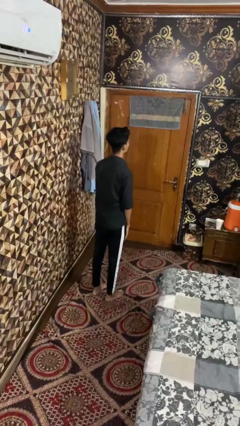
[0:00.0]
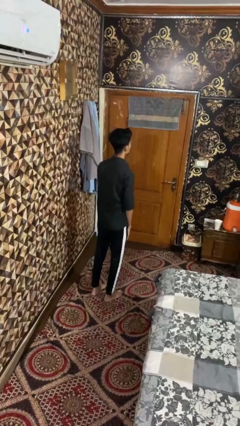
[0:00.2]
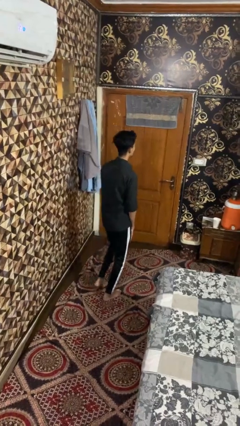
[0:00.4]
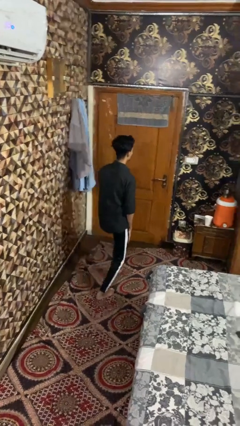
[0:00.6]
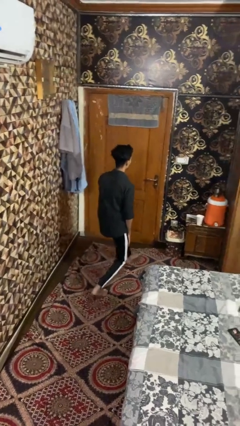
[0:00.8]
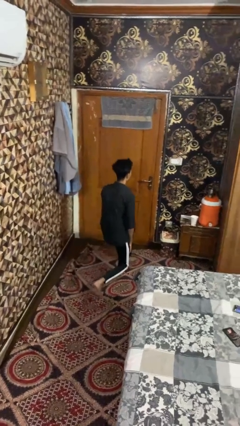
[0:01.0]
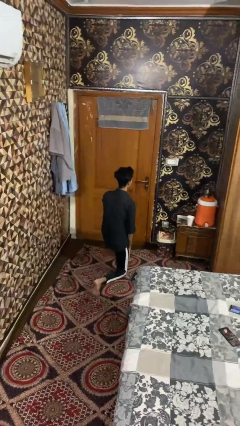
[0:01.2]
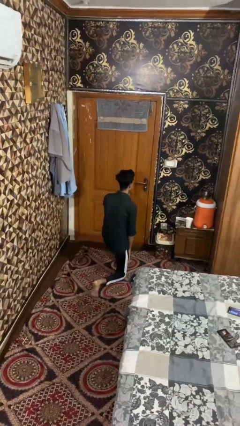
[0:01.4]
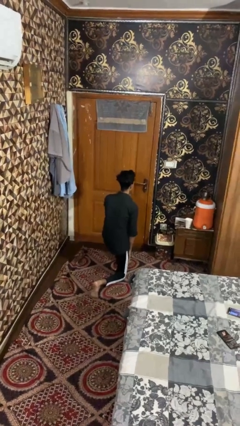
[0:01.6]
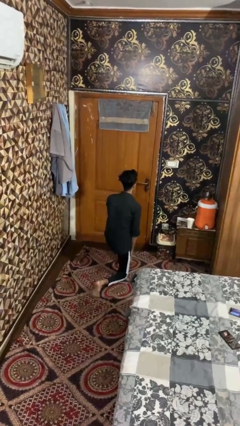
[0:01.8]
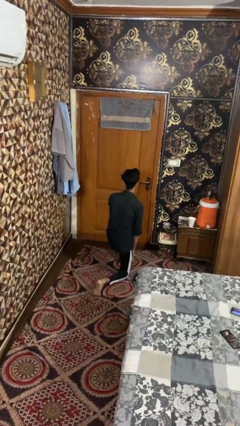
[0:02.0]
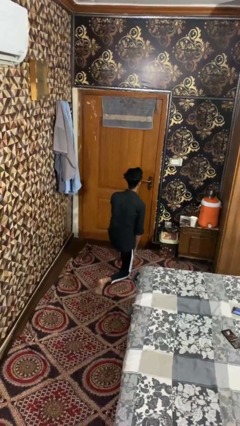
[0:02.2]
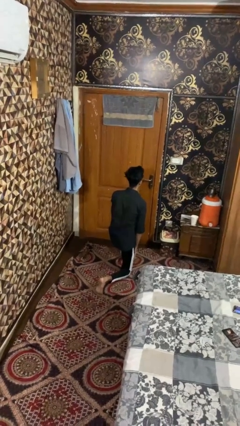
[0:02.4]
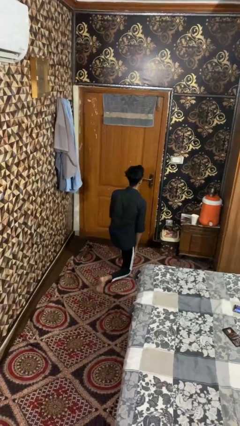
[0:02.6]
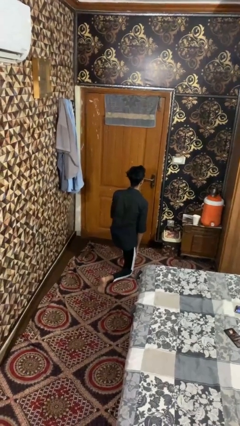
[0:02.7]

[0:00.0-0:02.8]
person exercises with lunges

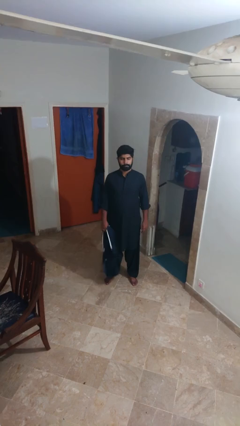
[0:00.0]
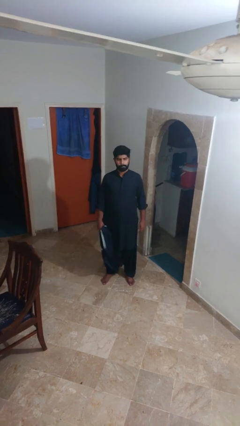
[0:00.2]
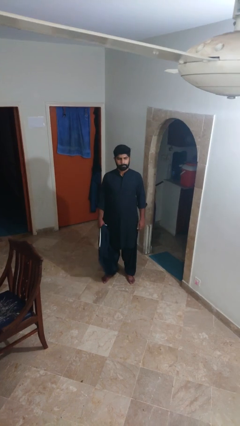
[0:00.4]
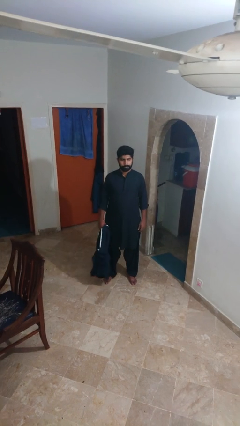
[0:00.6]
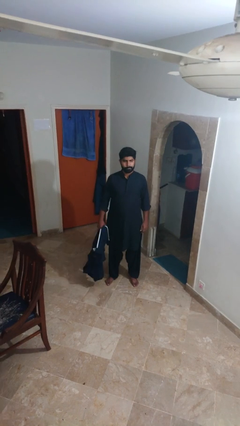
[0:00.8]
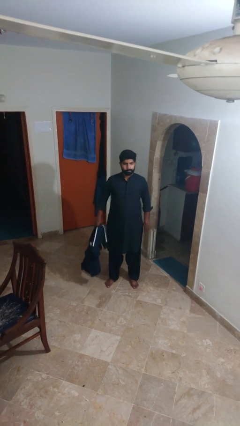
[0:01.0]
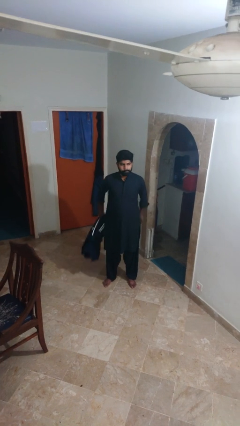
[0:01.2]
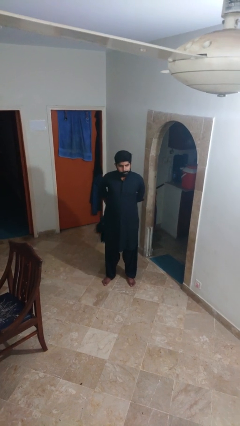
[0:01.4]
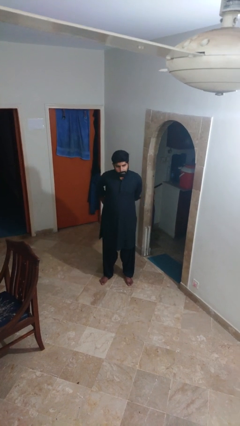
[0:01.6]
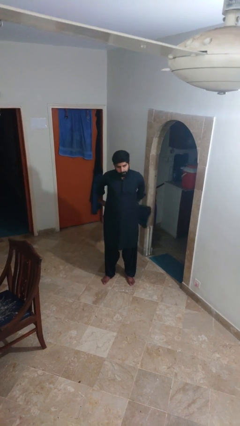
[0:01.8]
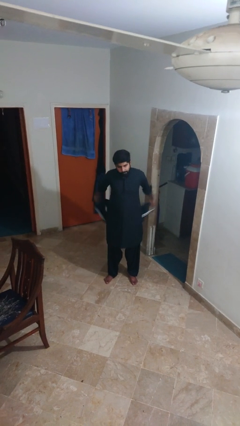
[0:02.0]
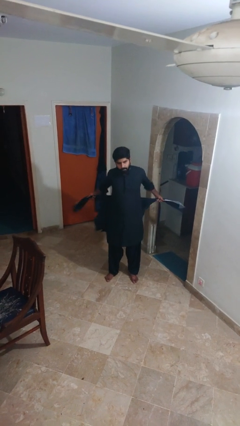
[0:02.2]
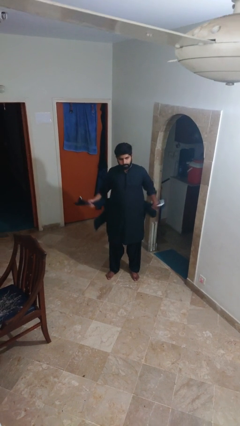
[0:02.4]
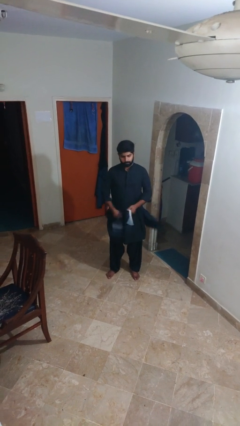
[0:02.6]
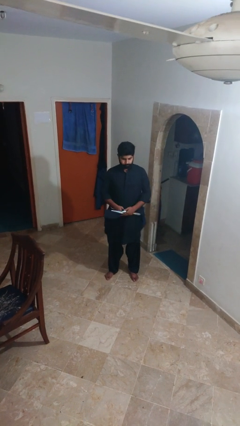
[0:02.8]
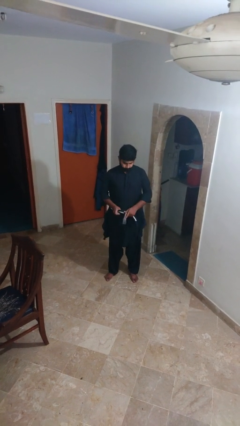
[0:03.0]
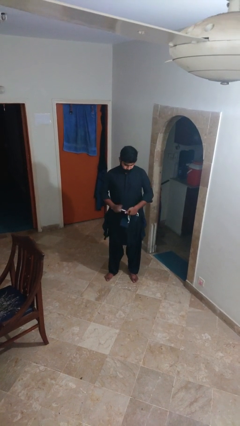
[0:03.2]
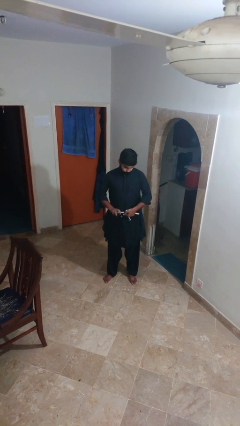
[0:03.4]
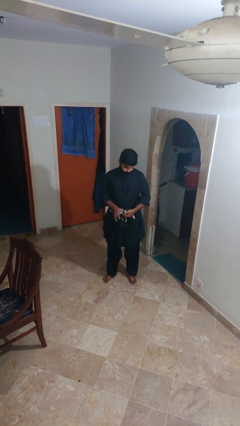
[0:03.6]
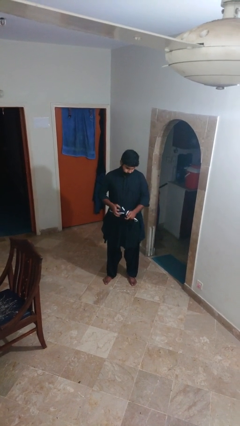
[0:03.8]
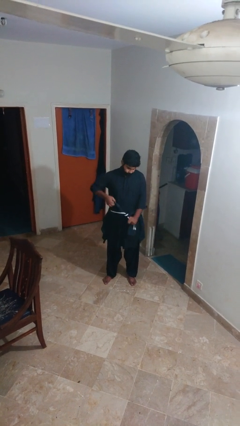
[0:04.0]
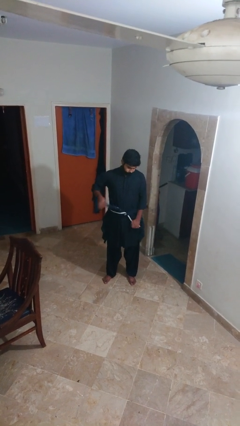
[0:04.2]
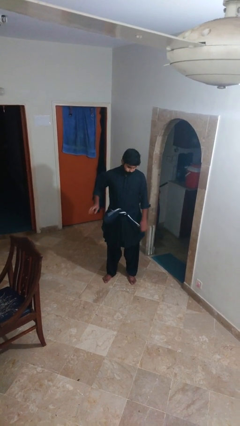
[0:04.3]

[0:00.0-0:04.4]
person ties jacket around waist

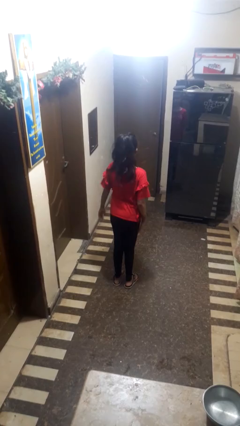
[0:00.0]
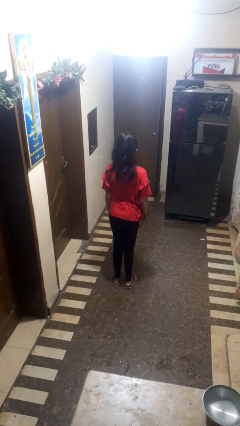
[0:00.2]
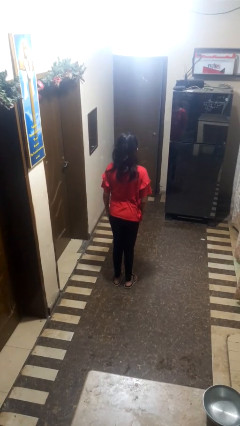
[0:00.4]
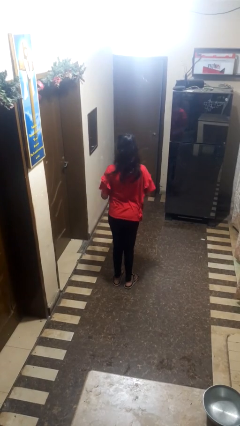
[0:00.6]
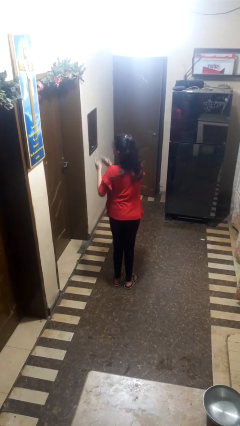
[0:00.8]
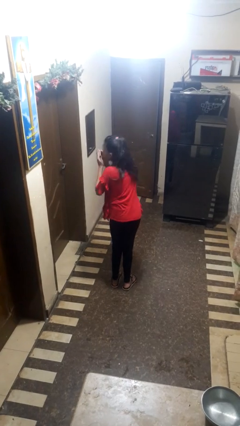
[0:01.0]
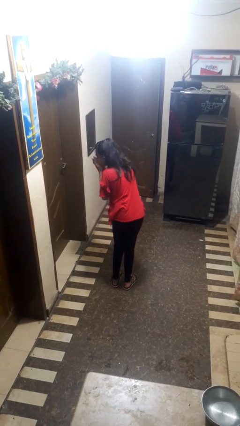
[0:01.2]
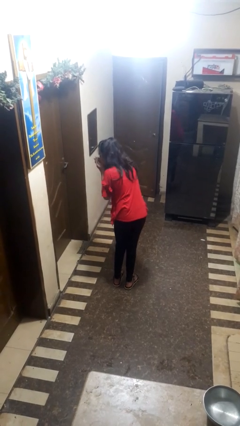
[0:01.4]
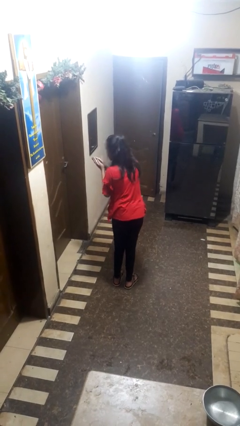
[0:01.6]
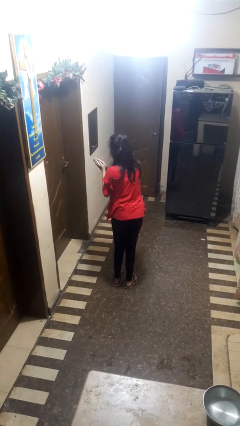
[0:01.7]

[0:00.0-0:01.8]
person sneezes into hand

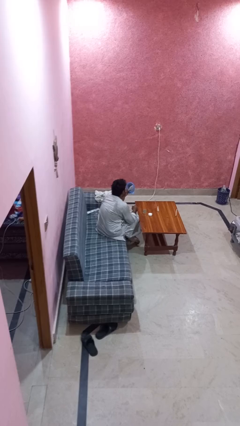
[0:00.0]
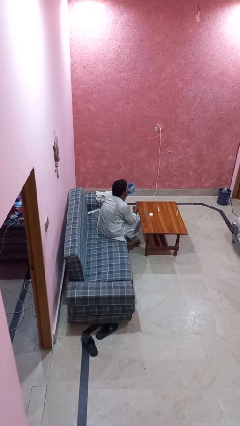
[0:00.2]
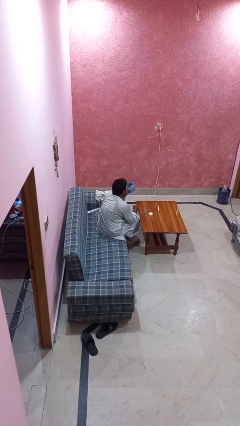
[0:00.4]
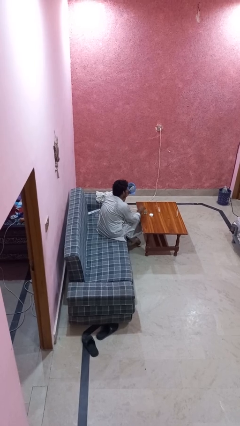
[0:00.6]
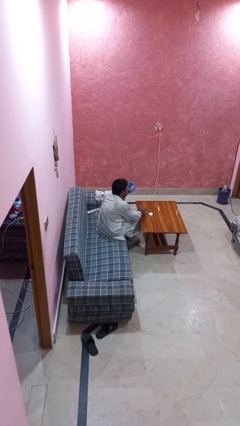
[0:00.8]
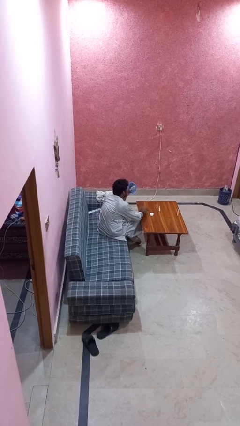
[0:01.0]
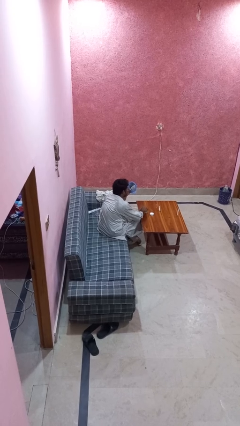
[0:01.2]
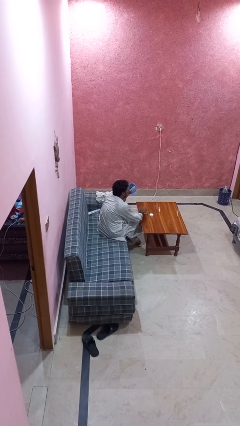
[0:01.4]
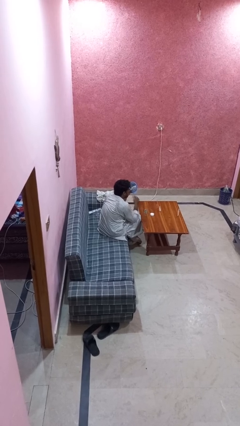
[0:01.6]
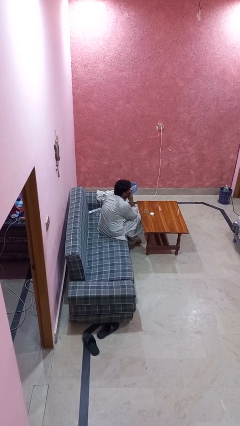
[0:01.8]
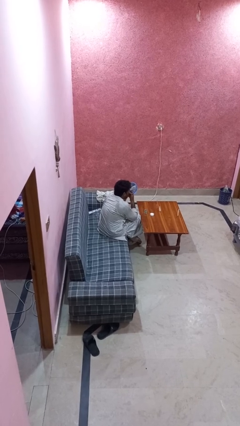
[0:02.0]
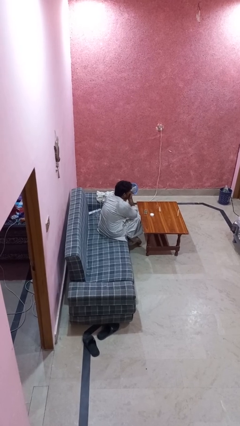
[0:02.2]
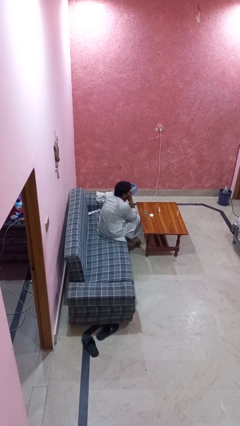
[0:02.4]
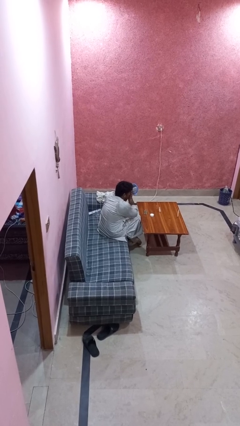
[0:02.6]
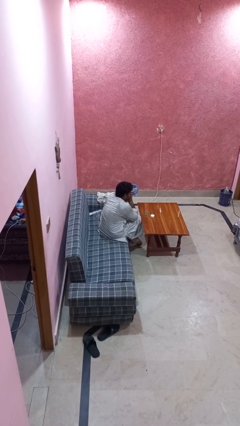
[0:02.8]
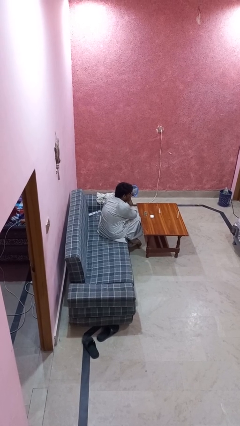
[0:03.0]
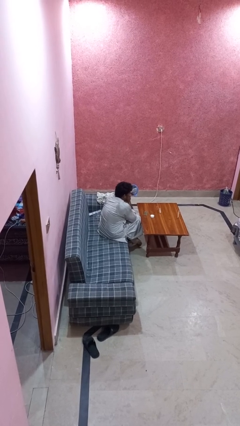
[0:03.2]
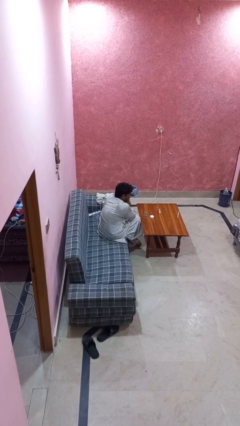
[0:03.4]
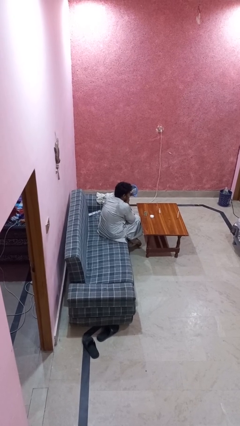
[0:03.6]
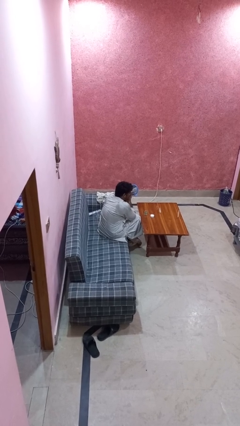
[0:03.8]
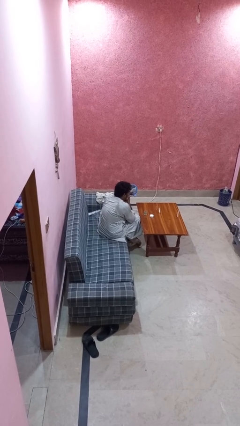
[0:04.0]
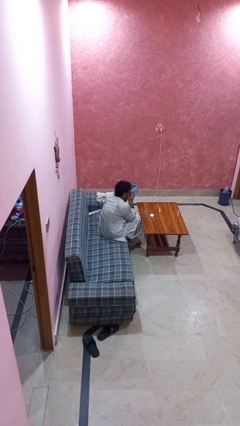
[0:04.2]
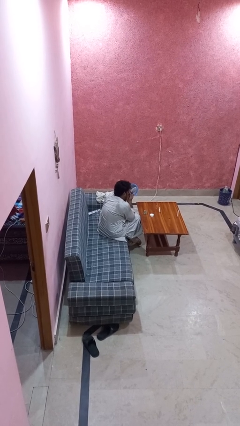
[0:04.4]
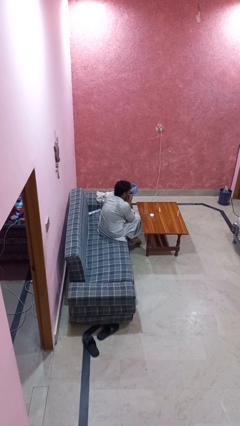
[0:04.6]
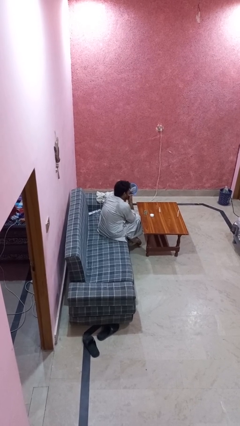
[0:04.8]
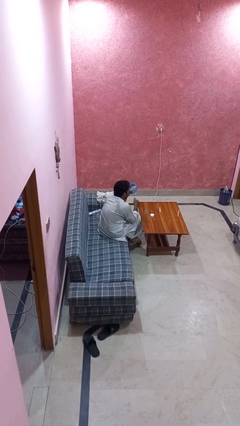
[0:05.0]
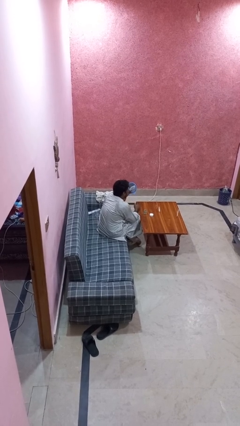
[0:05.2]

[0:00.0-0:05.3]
person applies foundation makeup

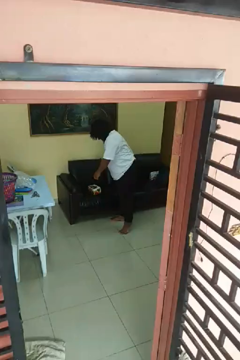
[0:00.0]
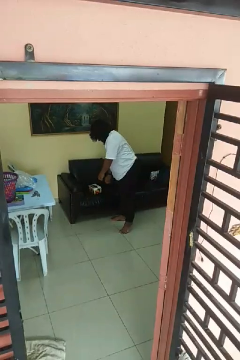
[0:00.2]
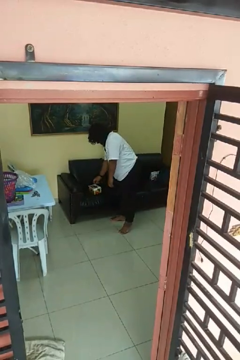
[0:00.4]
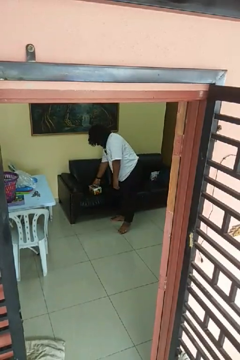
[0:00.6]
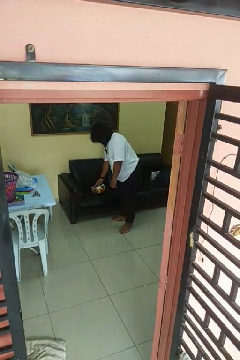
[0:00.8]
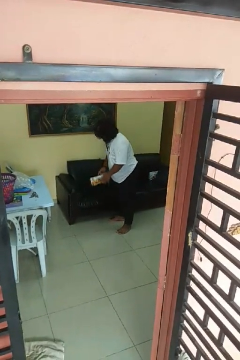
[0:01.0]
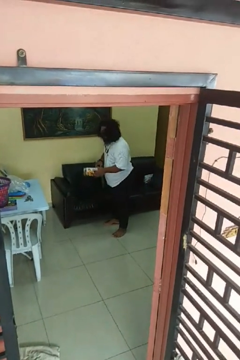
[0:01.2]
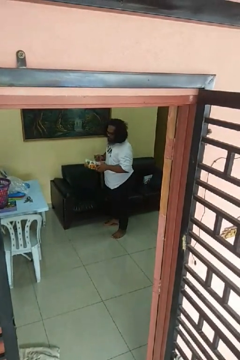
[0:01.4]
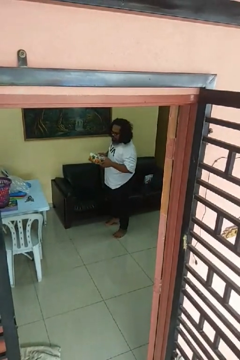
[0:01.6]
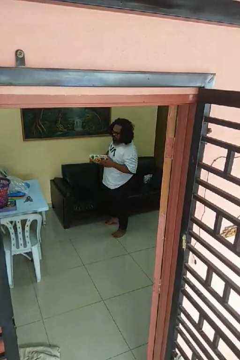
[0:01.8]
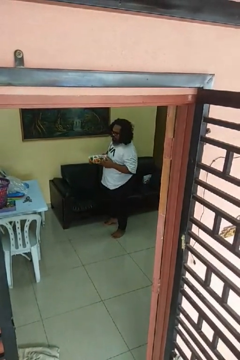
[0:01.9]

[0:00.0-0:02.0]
person picks up object from couch

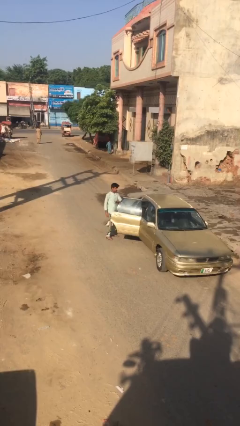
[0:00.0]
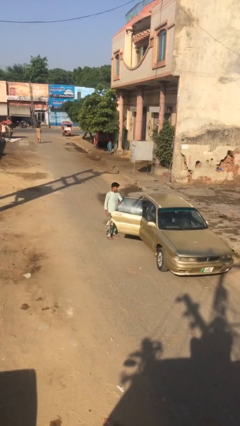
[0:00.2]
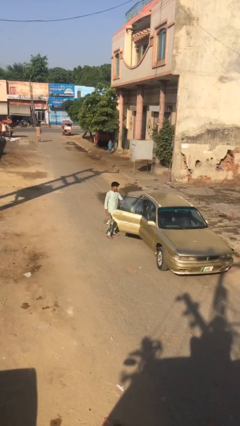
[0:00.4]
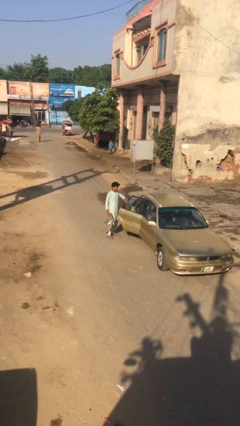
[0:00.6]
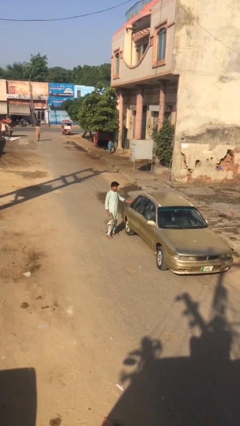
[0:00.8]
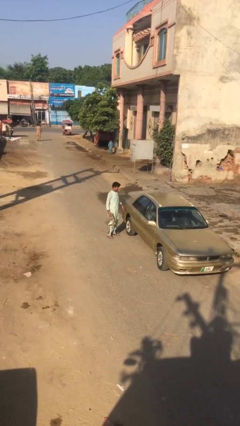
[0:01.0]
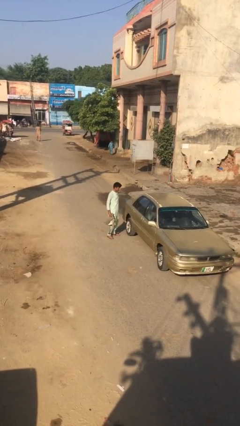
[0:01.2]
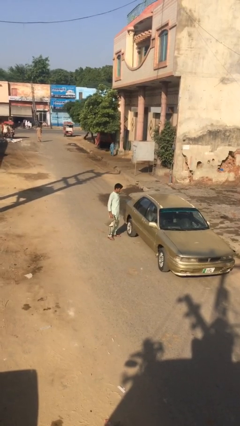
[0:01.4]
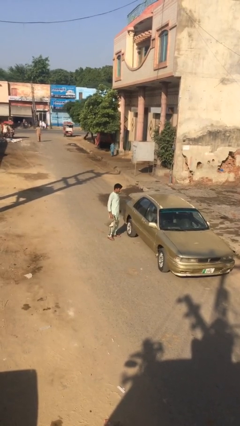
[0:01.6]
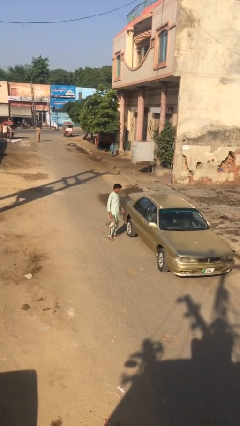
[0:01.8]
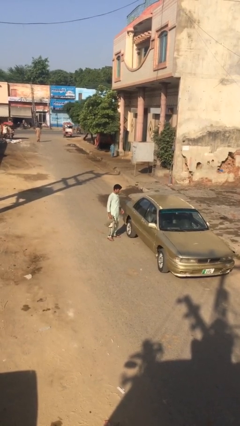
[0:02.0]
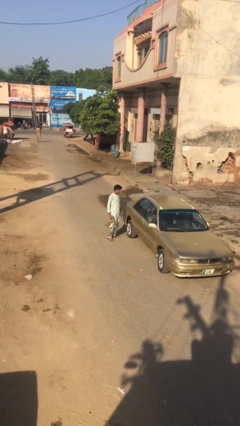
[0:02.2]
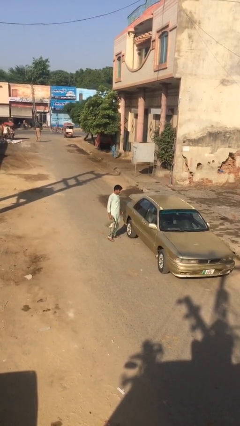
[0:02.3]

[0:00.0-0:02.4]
person closes car door
